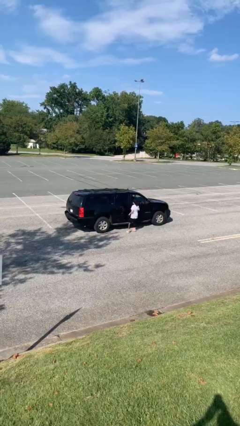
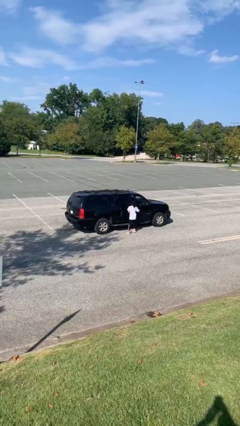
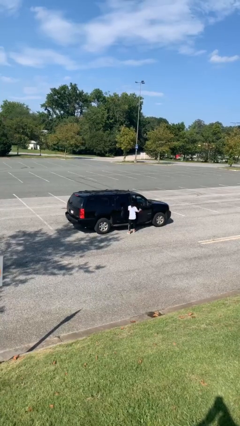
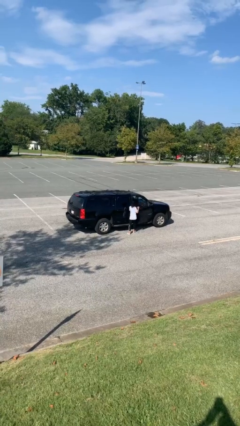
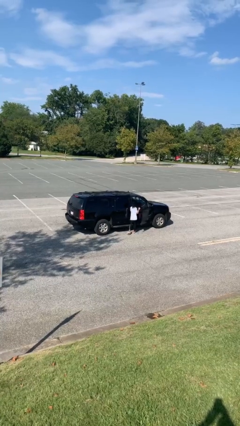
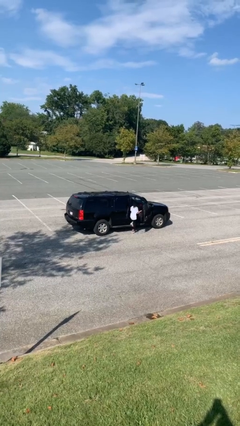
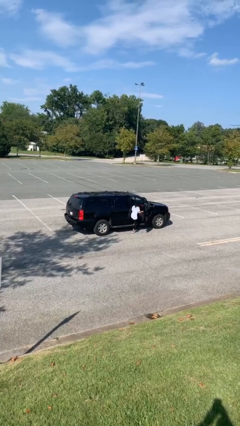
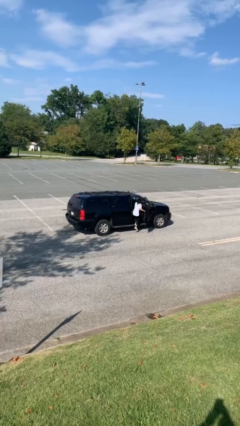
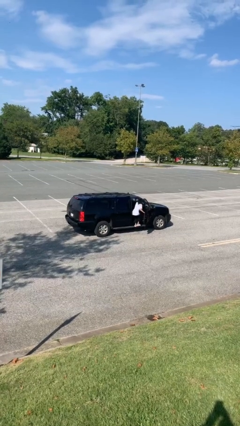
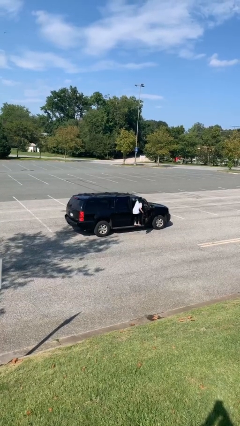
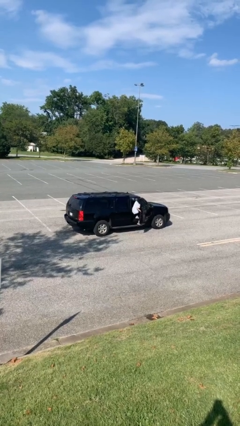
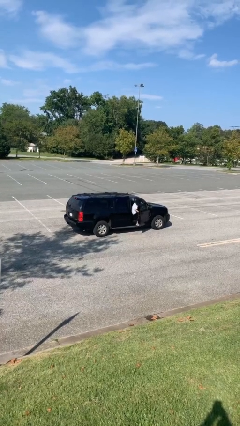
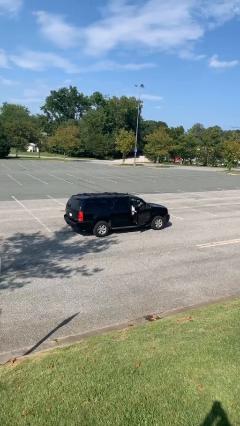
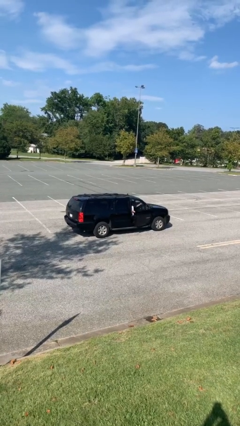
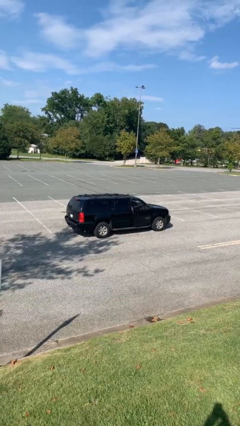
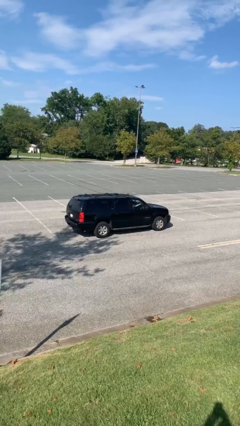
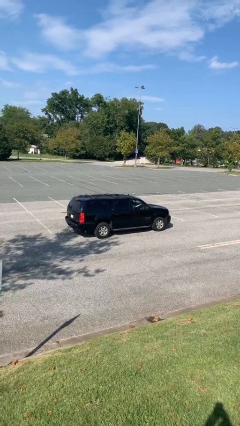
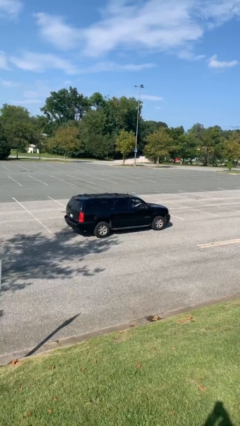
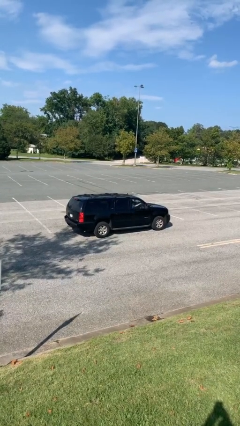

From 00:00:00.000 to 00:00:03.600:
car picks up person

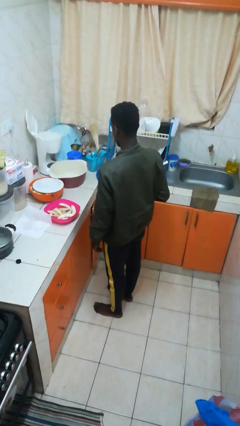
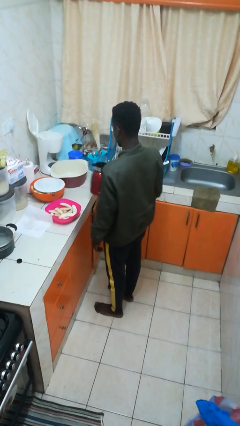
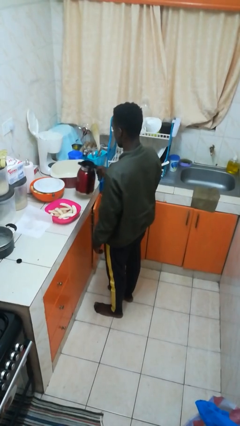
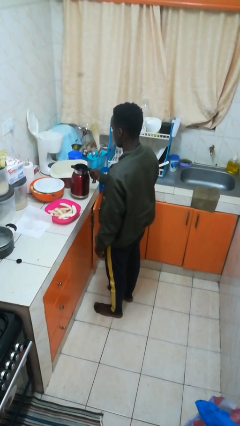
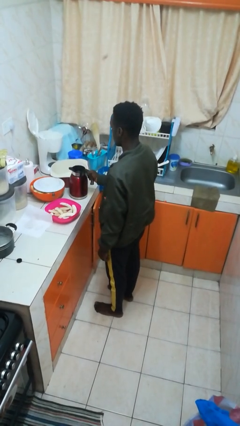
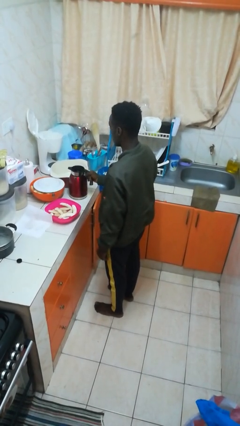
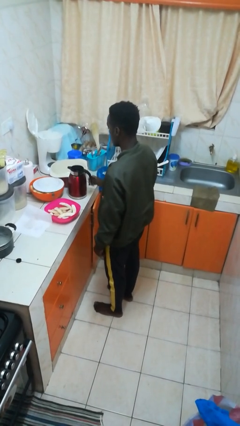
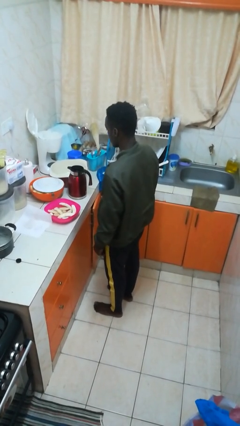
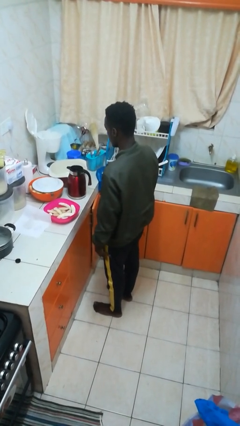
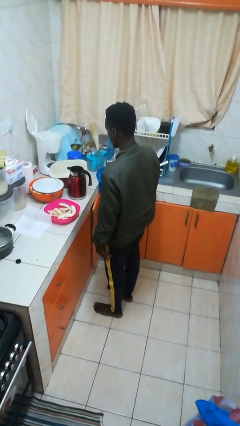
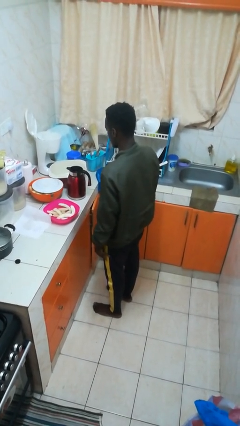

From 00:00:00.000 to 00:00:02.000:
person puts down object on countertop

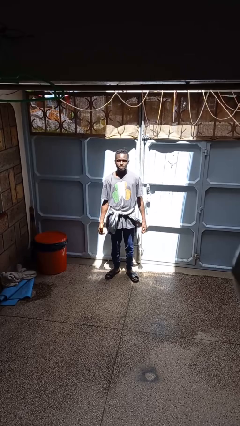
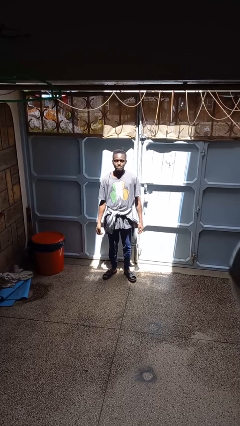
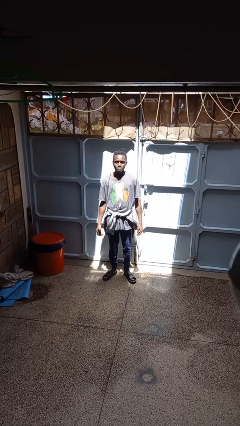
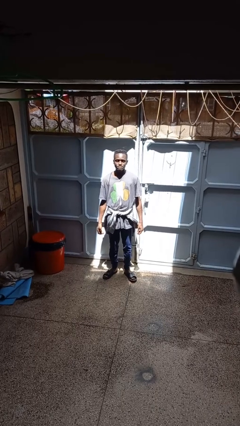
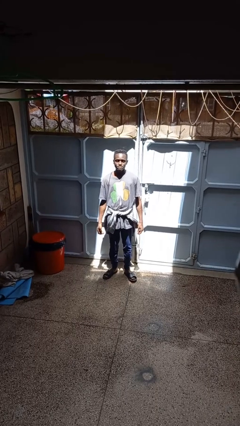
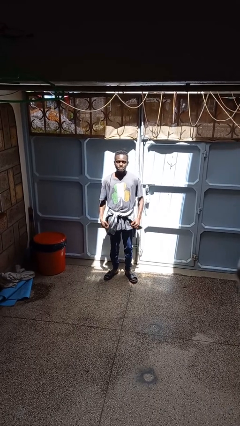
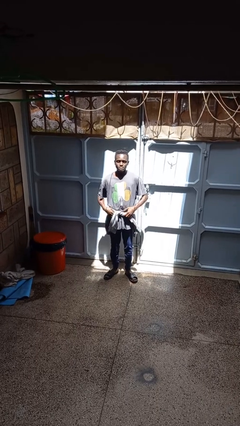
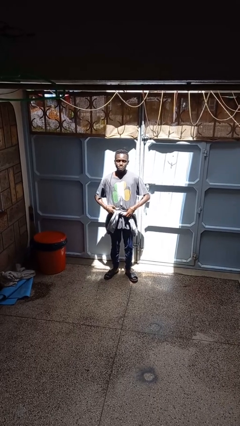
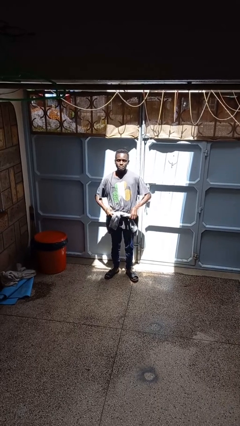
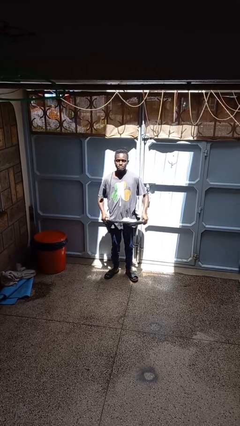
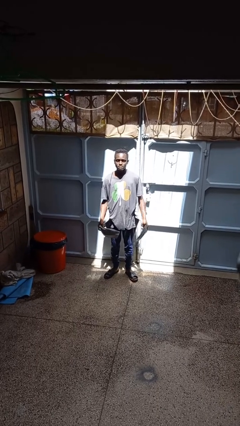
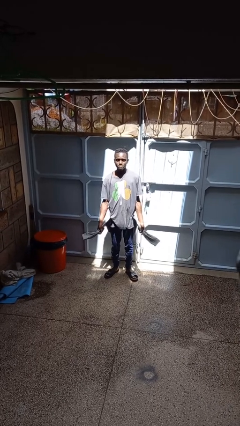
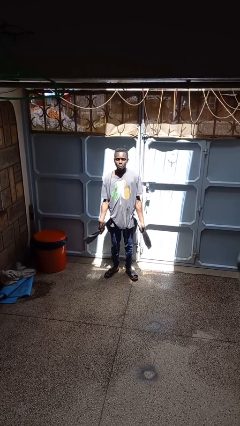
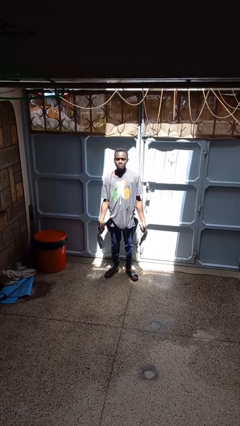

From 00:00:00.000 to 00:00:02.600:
person unties jacket around waist

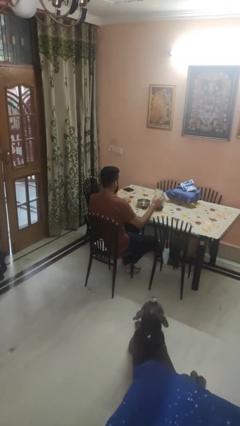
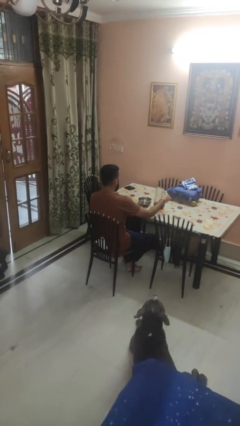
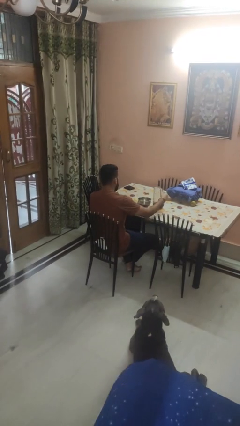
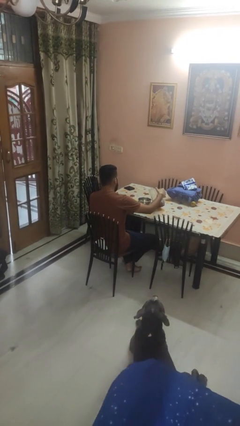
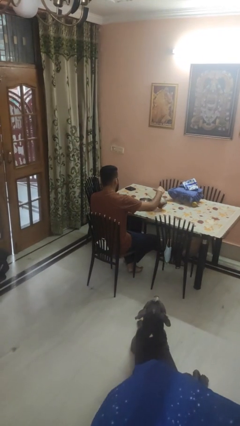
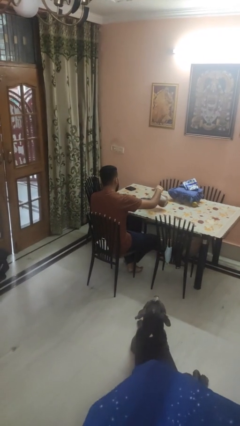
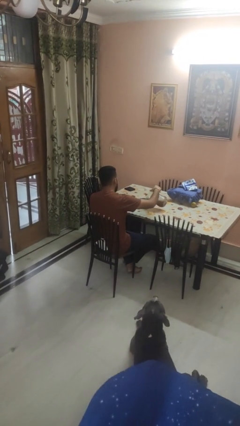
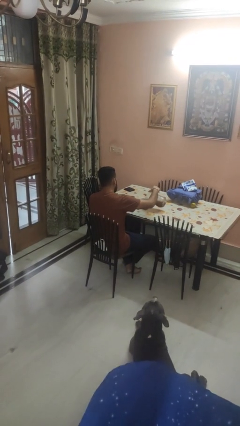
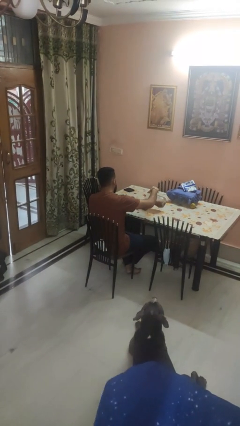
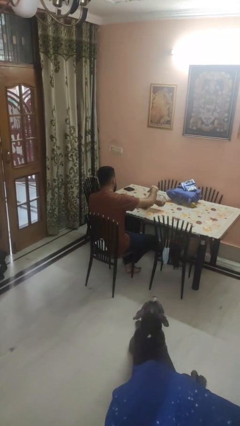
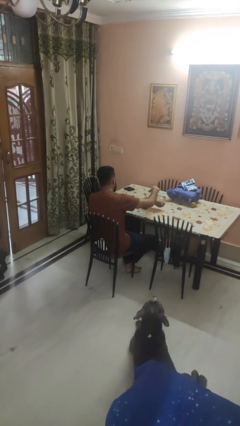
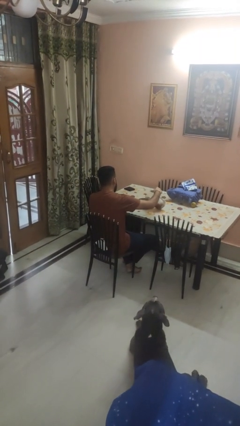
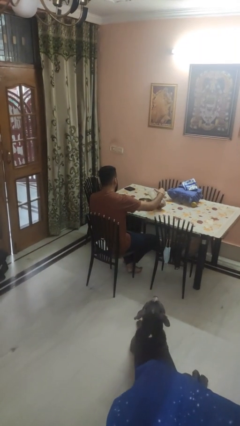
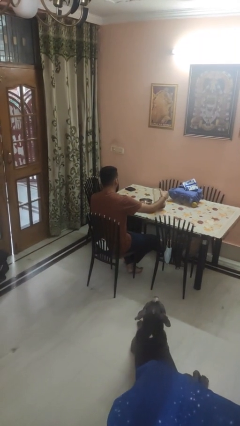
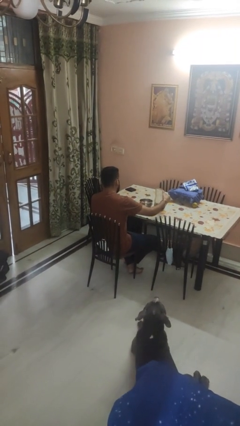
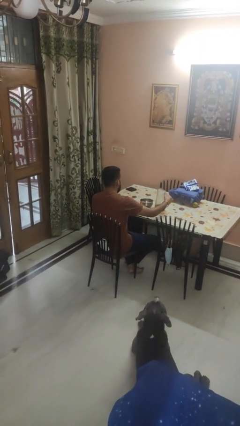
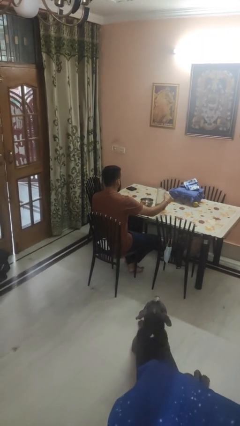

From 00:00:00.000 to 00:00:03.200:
person pours into bowl

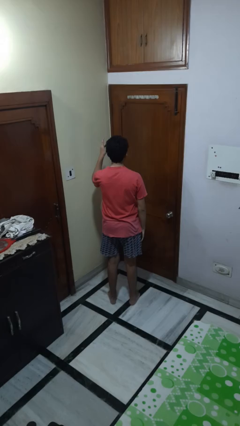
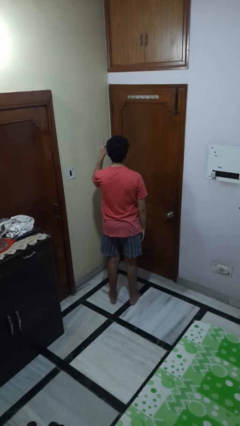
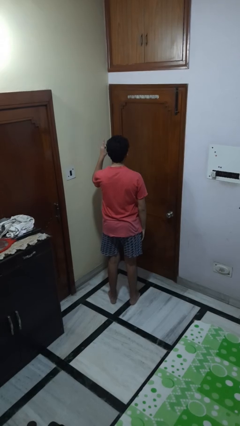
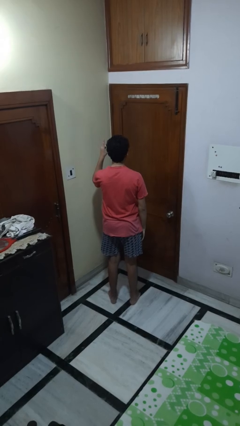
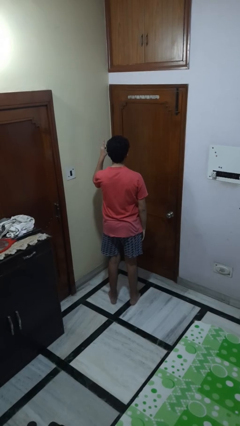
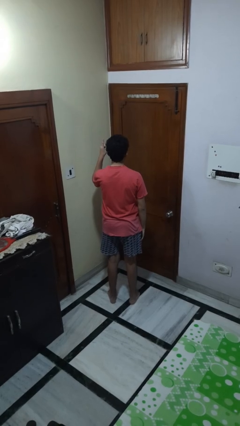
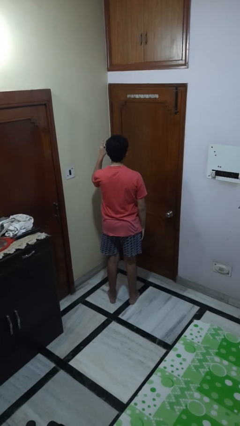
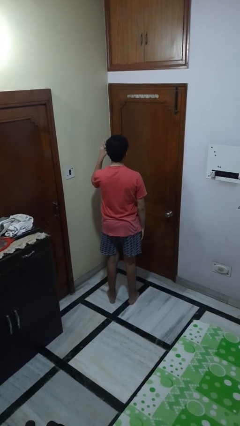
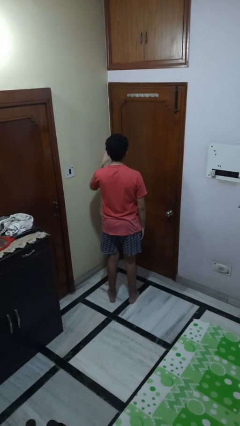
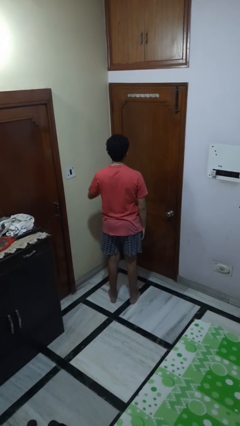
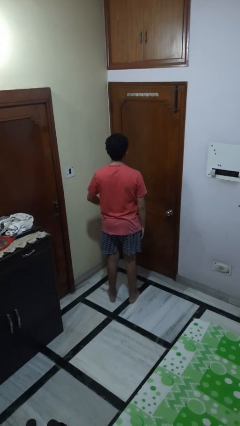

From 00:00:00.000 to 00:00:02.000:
person gestures number one

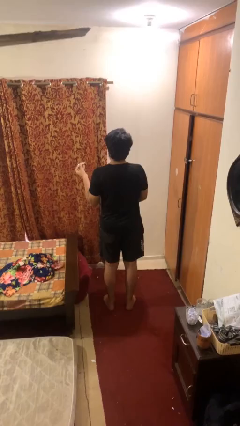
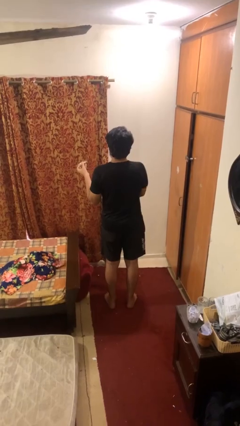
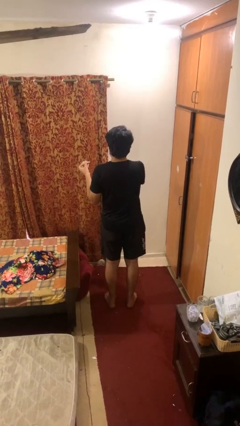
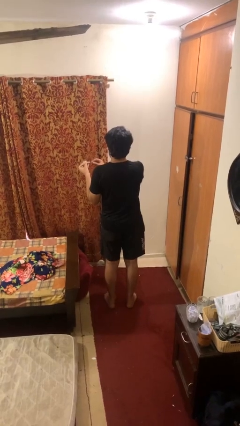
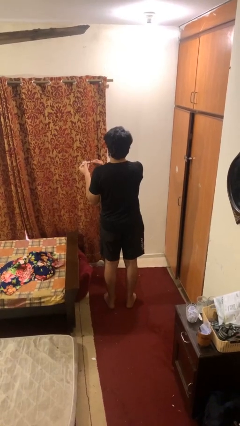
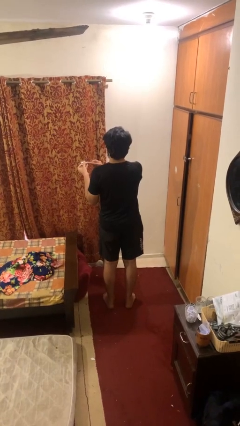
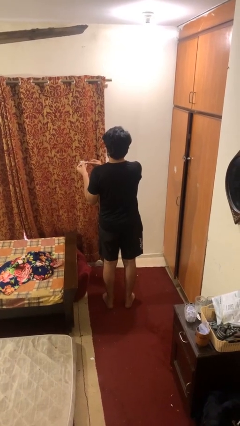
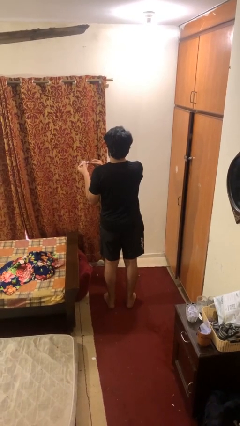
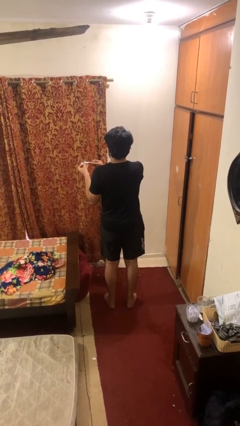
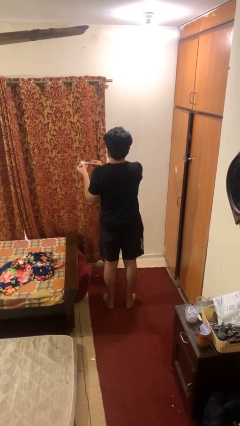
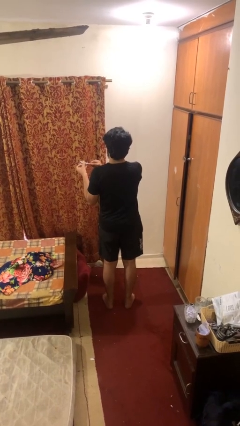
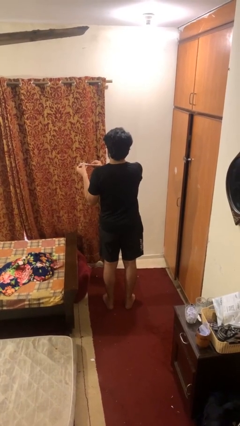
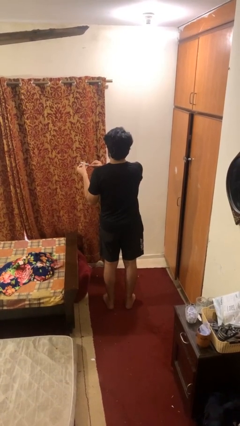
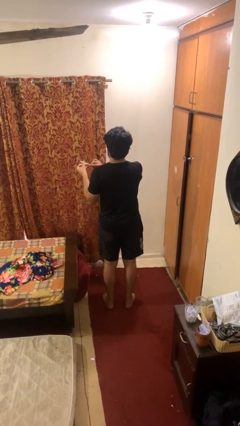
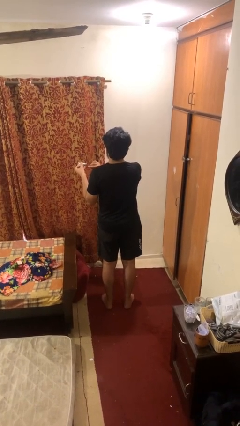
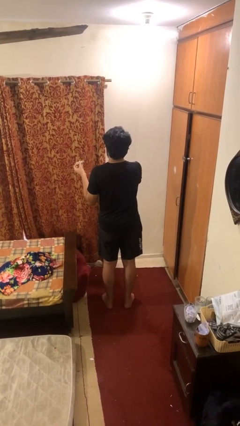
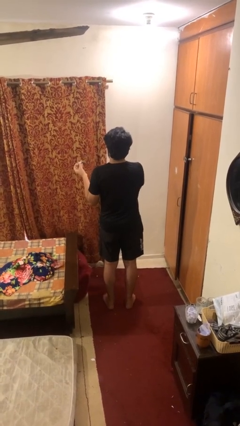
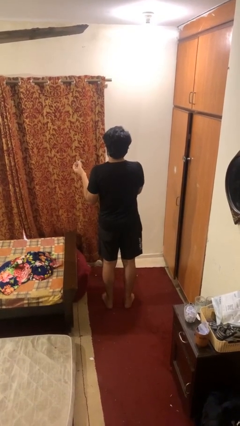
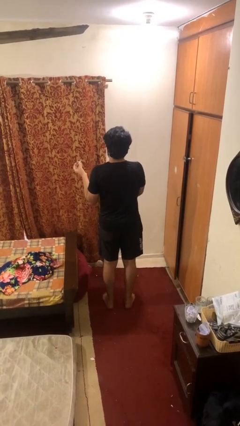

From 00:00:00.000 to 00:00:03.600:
person clips fingernails

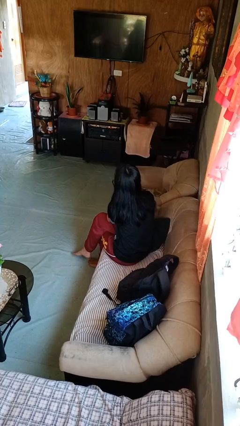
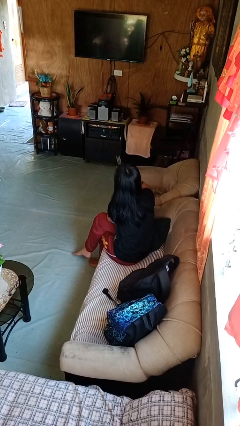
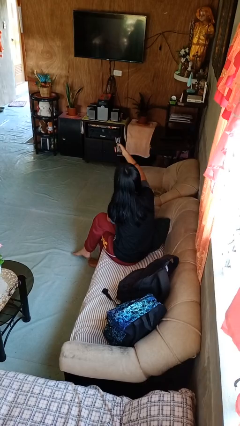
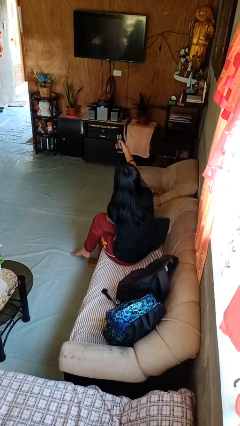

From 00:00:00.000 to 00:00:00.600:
person uses television remote
